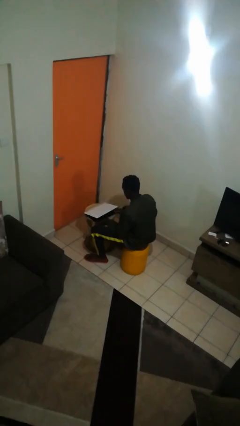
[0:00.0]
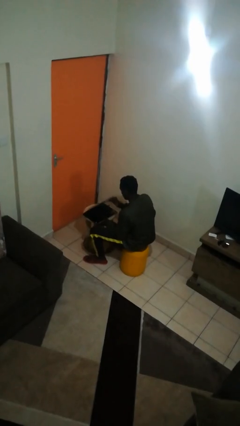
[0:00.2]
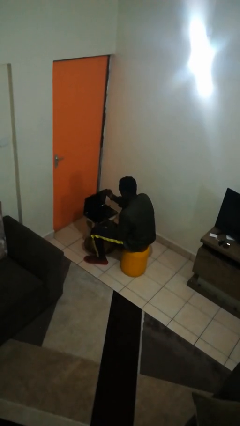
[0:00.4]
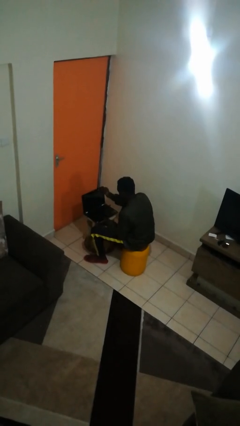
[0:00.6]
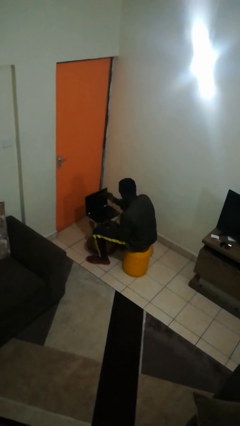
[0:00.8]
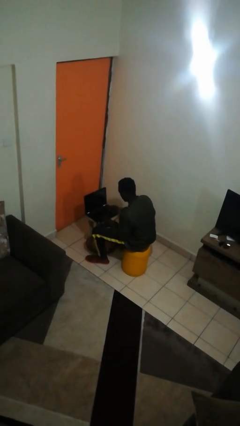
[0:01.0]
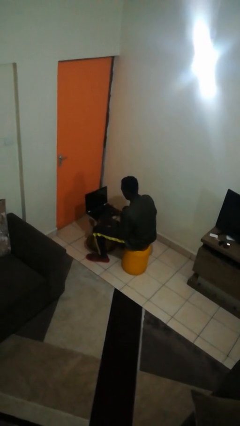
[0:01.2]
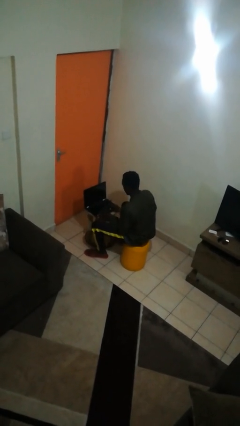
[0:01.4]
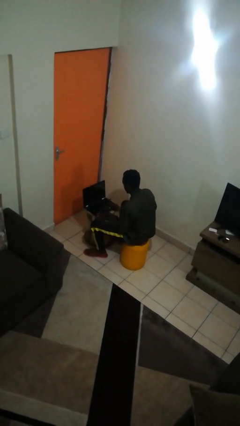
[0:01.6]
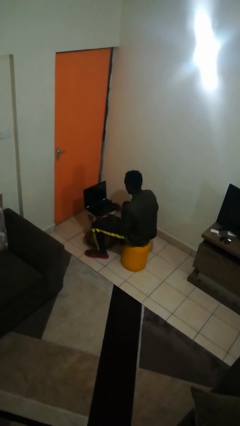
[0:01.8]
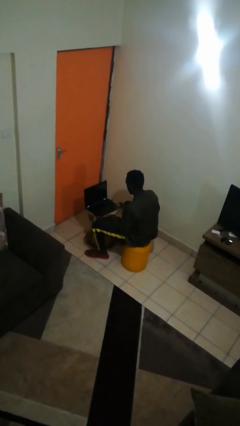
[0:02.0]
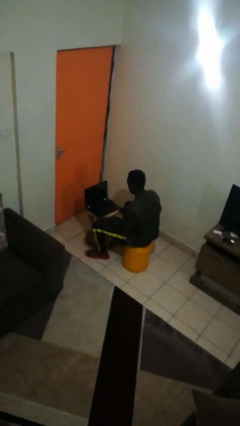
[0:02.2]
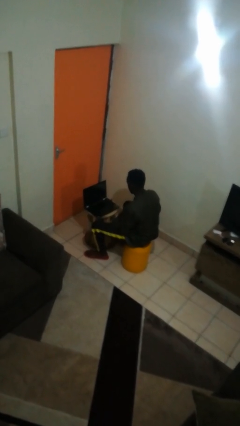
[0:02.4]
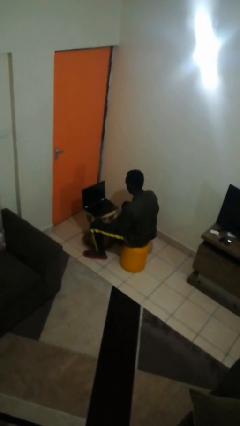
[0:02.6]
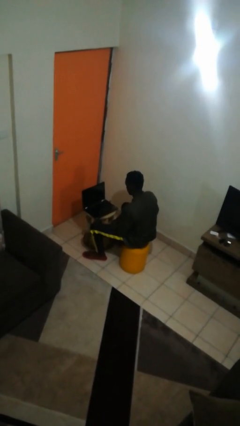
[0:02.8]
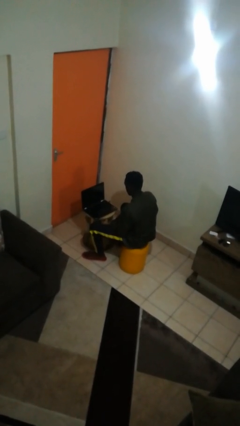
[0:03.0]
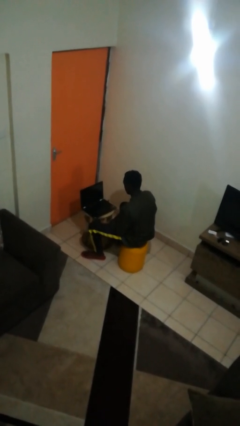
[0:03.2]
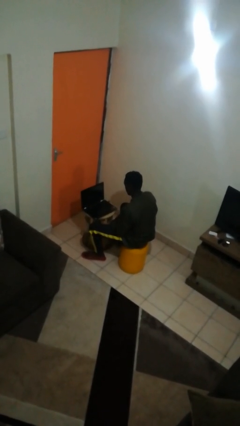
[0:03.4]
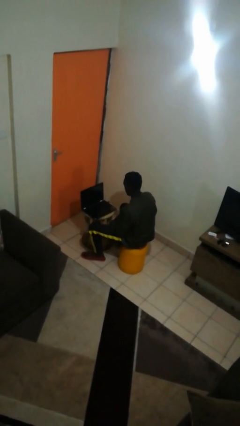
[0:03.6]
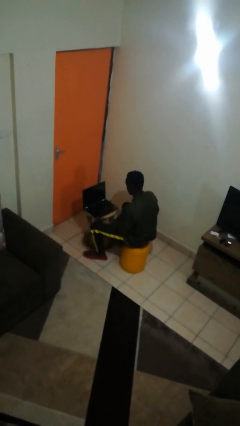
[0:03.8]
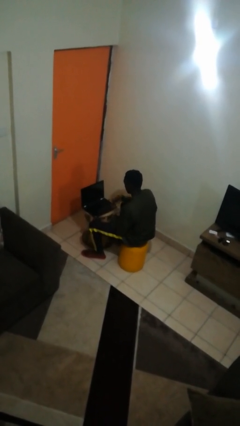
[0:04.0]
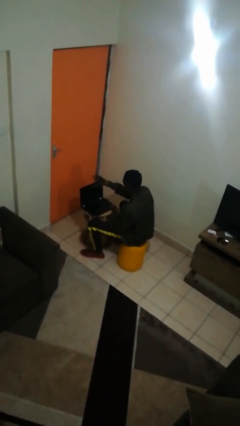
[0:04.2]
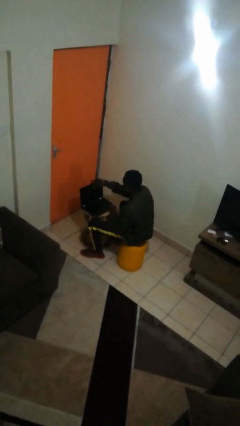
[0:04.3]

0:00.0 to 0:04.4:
person opens laptop

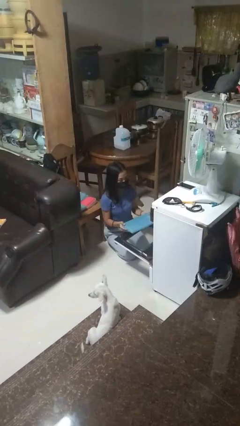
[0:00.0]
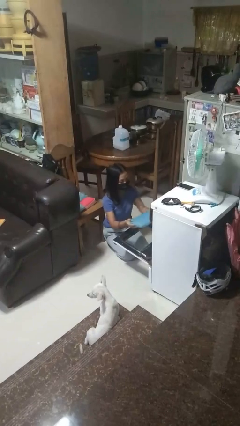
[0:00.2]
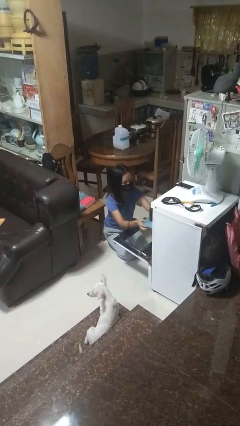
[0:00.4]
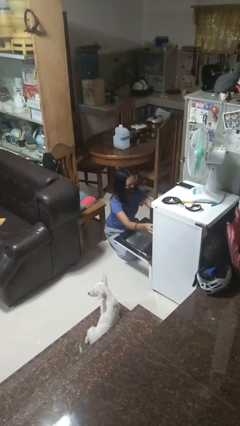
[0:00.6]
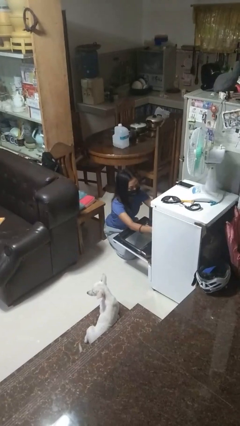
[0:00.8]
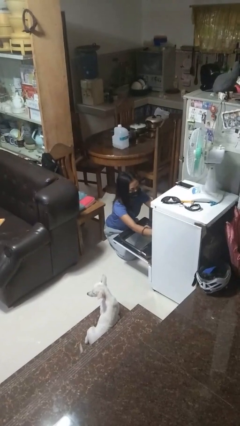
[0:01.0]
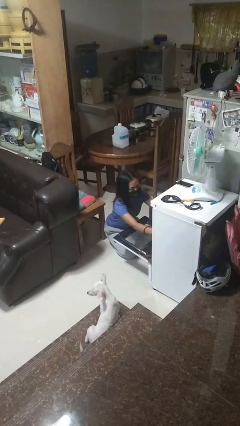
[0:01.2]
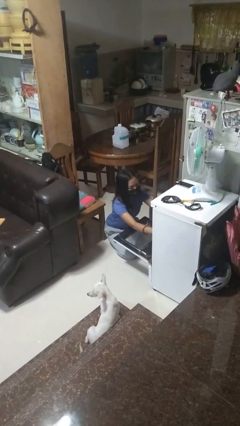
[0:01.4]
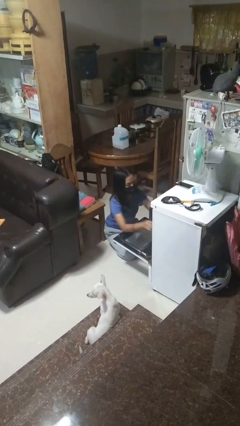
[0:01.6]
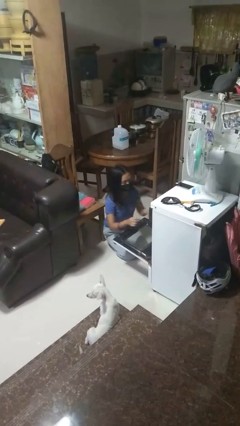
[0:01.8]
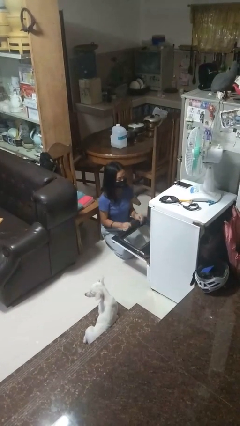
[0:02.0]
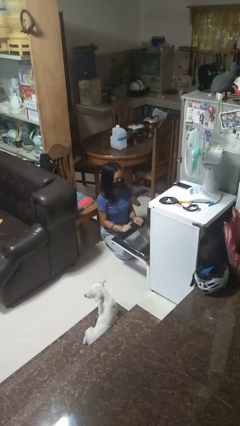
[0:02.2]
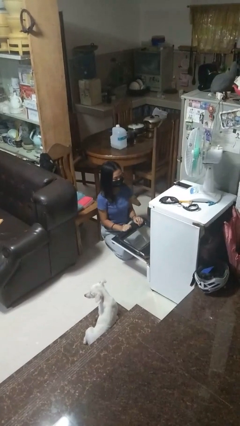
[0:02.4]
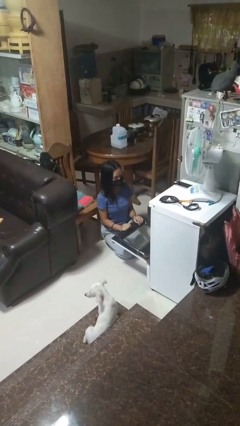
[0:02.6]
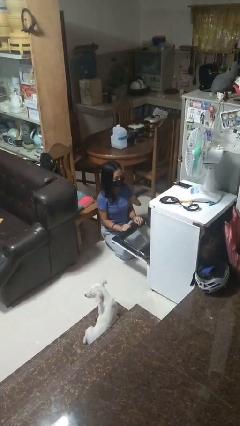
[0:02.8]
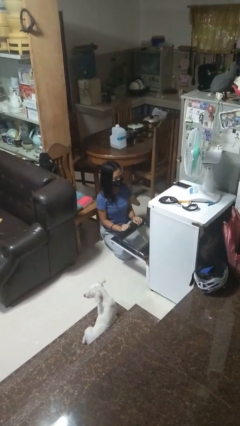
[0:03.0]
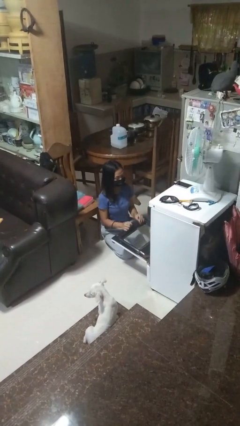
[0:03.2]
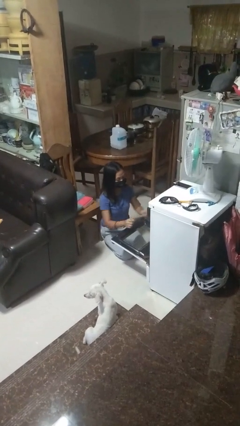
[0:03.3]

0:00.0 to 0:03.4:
person puts object into oven

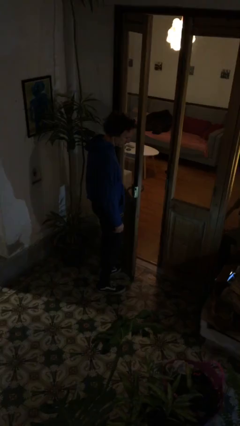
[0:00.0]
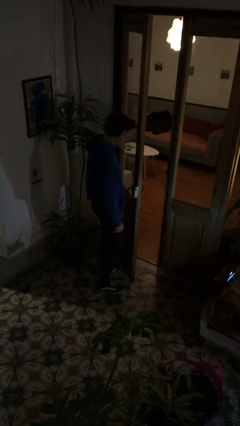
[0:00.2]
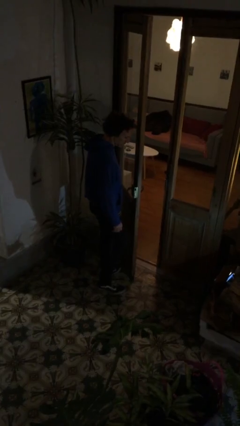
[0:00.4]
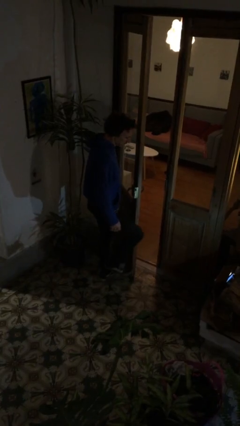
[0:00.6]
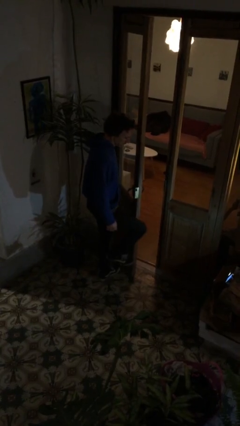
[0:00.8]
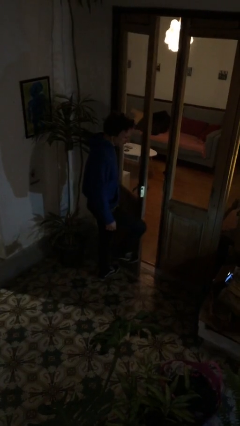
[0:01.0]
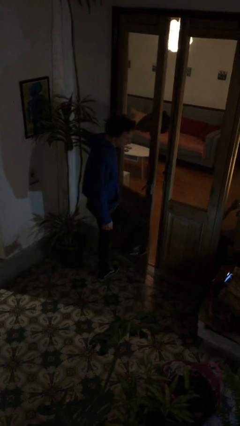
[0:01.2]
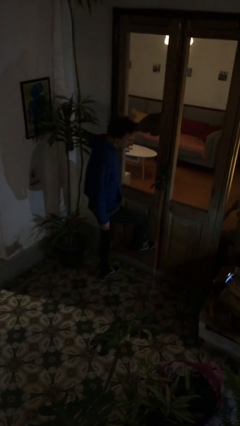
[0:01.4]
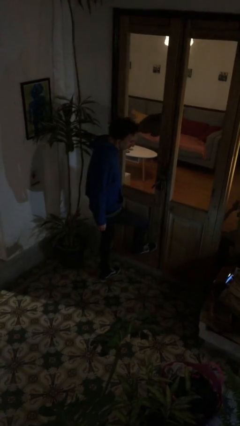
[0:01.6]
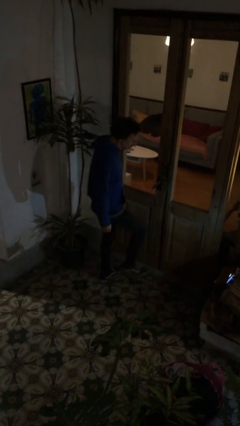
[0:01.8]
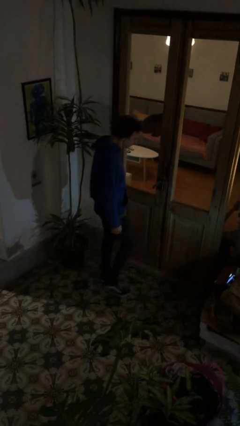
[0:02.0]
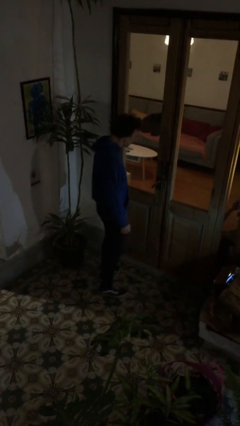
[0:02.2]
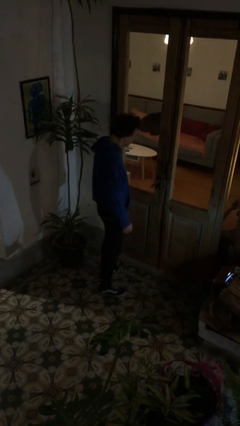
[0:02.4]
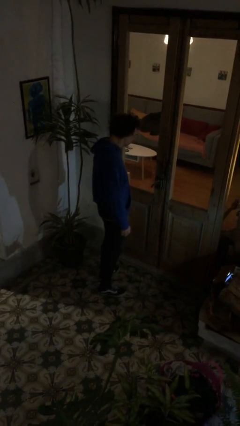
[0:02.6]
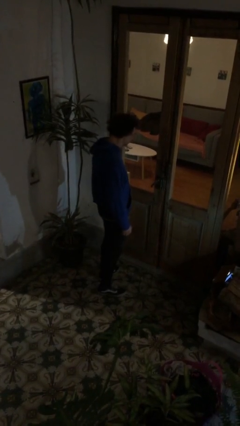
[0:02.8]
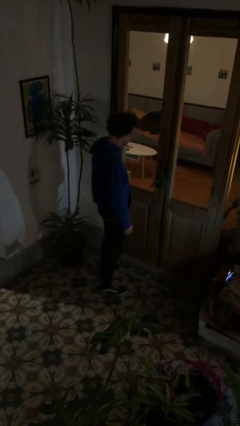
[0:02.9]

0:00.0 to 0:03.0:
person closes door with foot

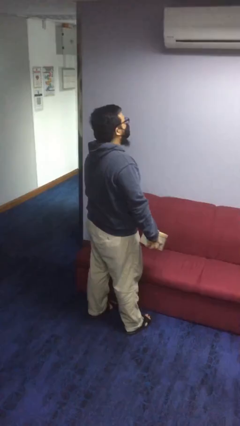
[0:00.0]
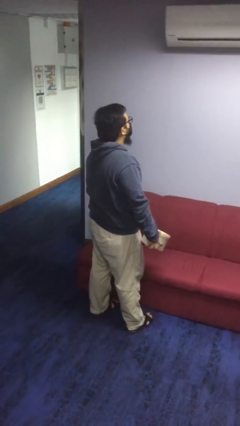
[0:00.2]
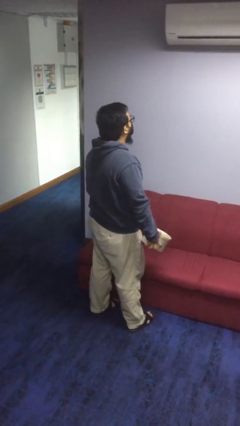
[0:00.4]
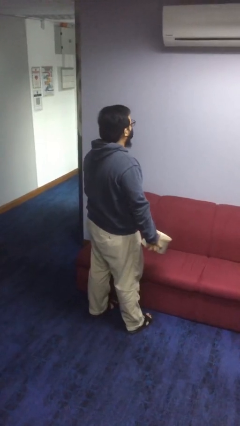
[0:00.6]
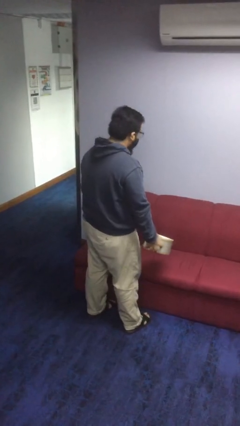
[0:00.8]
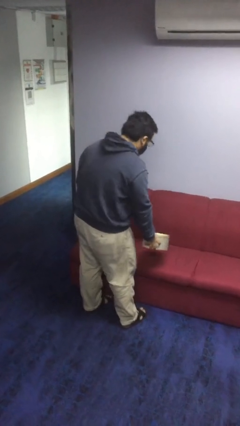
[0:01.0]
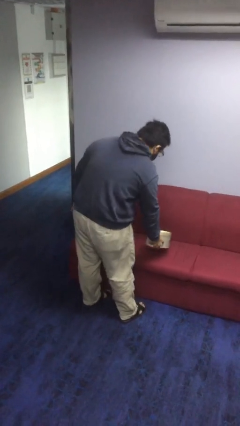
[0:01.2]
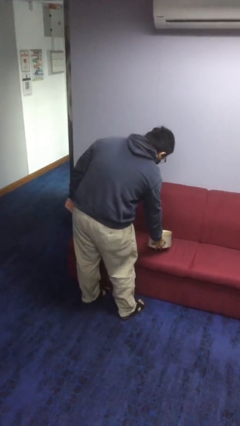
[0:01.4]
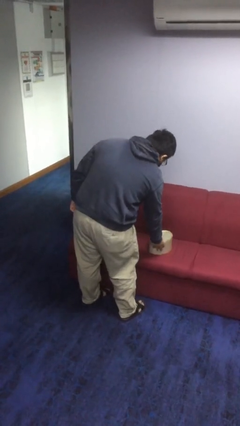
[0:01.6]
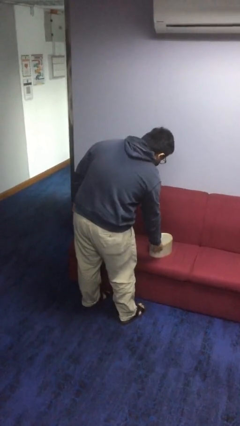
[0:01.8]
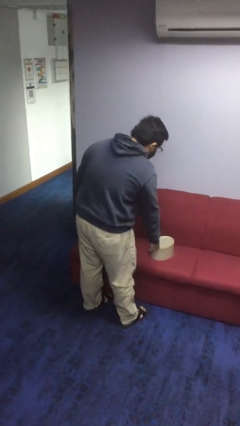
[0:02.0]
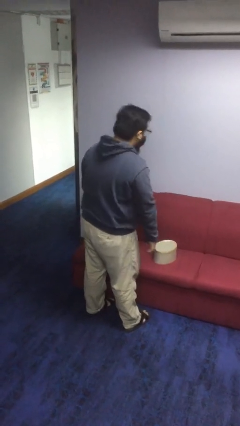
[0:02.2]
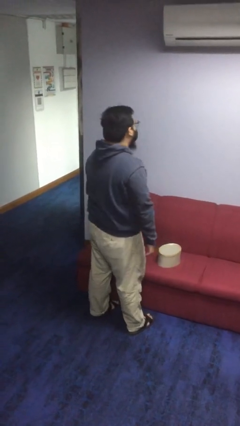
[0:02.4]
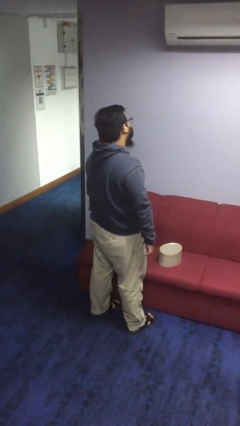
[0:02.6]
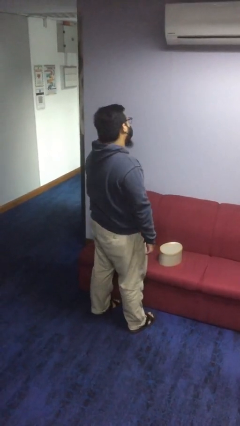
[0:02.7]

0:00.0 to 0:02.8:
person puts down object on couch

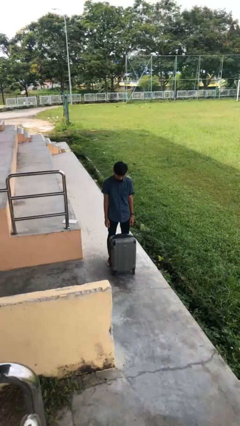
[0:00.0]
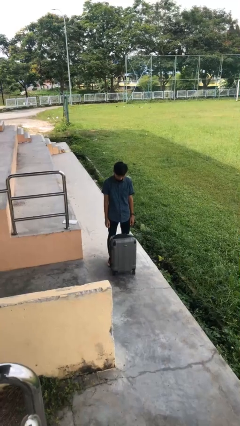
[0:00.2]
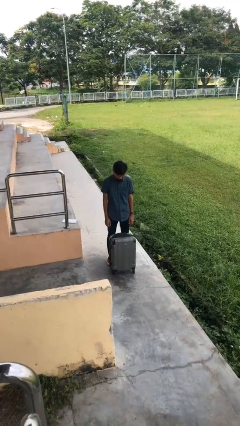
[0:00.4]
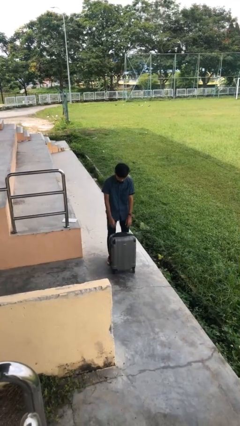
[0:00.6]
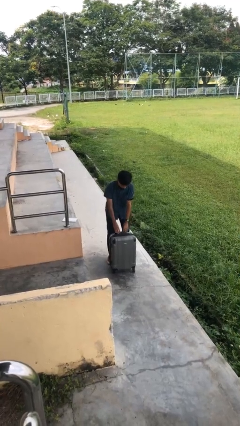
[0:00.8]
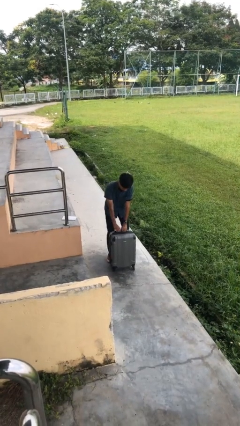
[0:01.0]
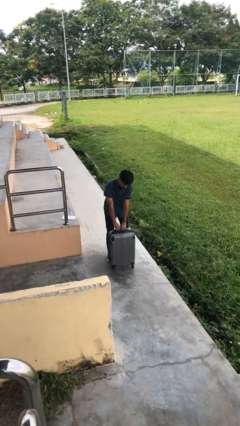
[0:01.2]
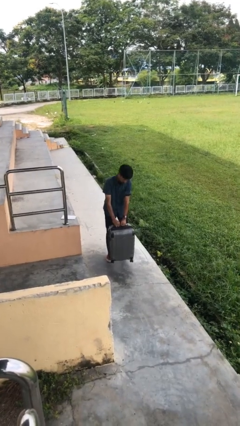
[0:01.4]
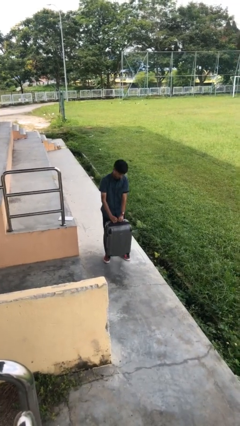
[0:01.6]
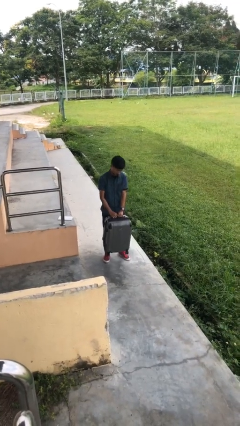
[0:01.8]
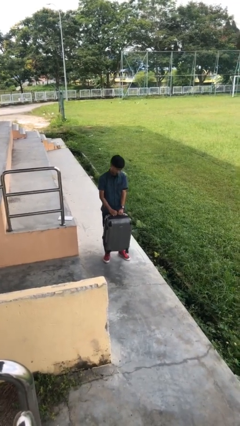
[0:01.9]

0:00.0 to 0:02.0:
person picks up object from floor

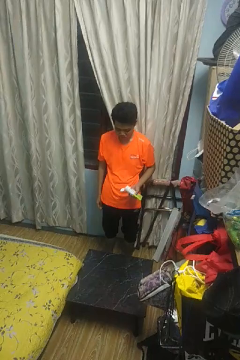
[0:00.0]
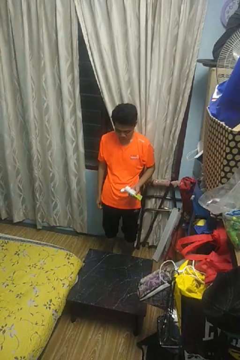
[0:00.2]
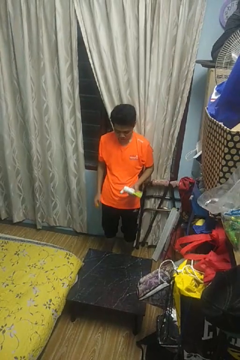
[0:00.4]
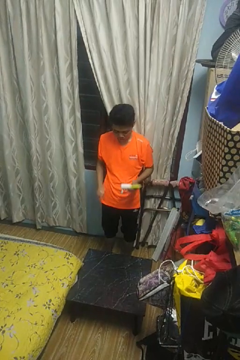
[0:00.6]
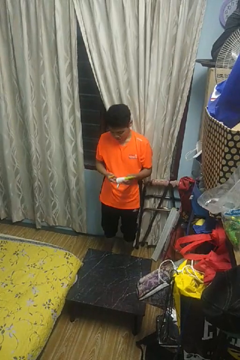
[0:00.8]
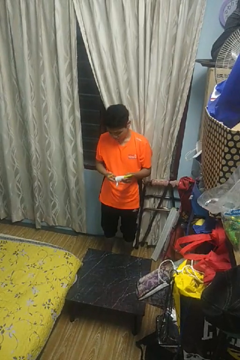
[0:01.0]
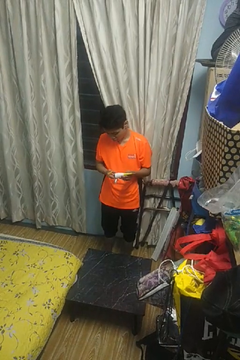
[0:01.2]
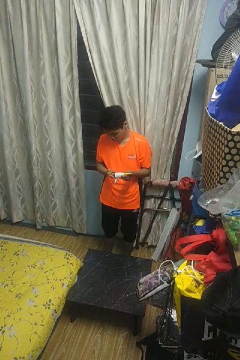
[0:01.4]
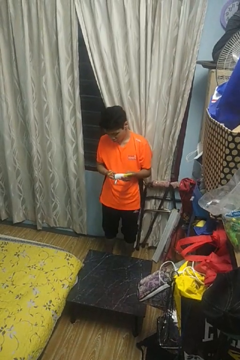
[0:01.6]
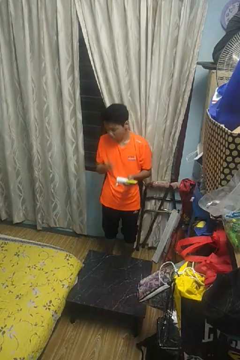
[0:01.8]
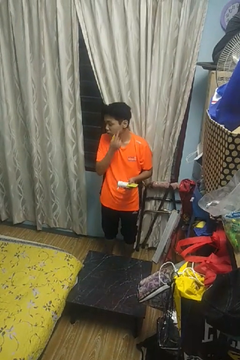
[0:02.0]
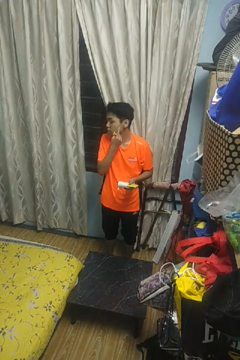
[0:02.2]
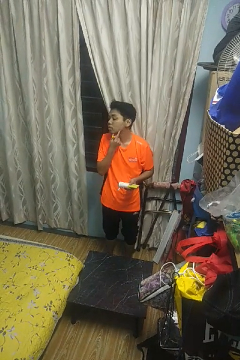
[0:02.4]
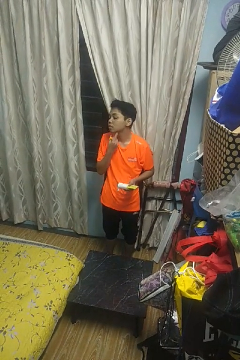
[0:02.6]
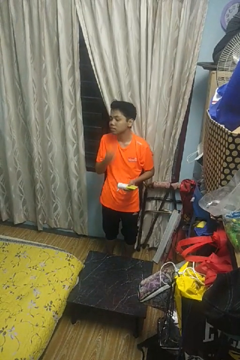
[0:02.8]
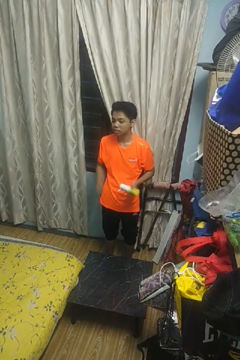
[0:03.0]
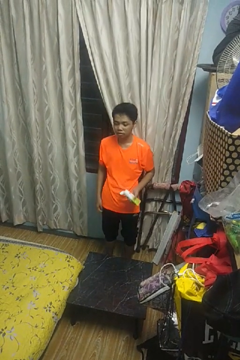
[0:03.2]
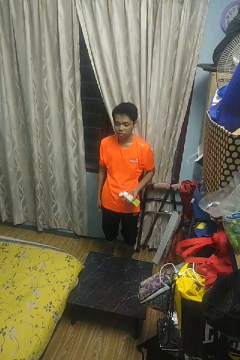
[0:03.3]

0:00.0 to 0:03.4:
person applies shaving cream
